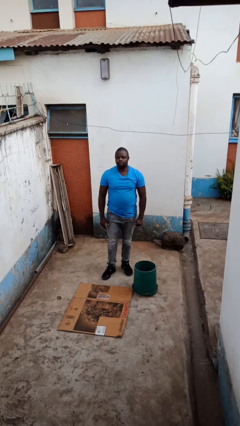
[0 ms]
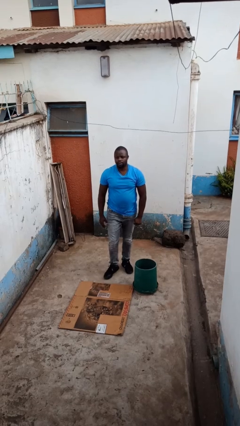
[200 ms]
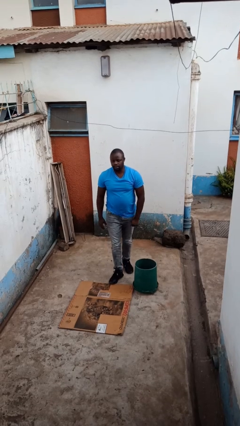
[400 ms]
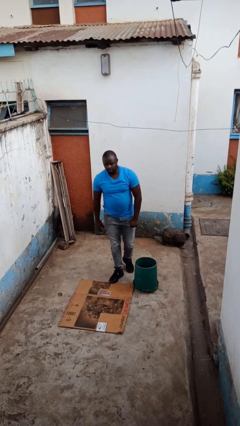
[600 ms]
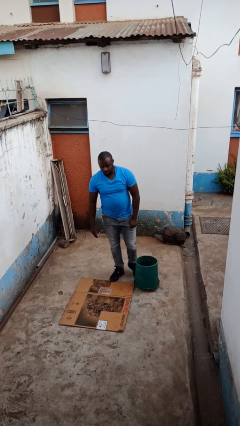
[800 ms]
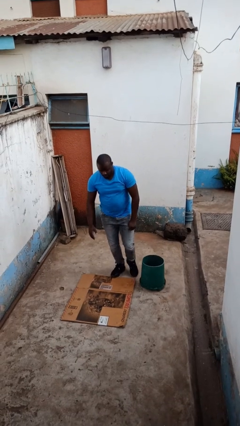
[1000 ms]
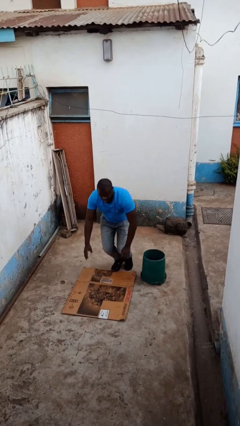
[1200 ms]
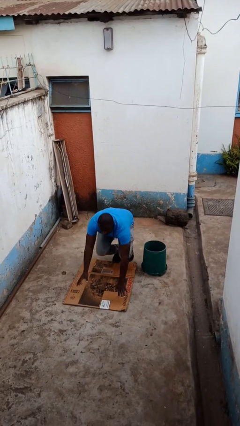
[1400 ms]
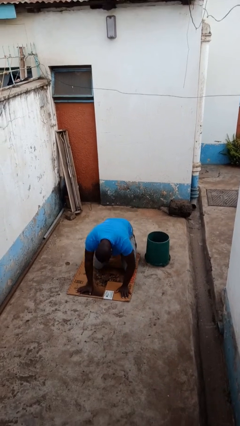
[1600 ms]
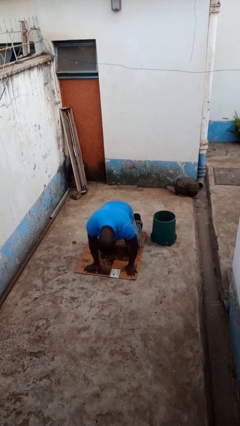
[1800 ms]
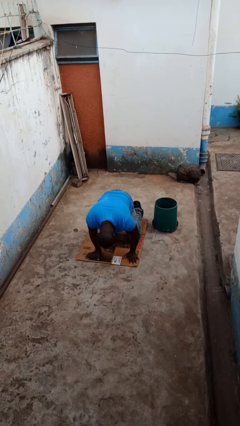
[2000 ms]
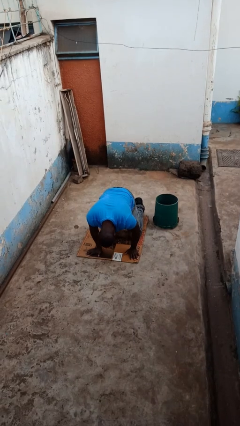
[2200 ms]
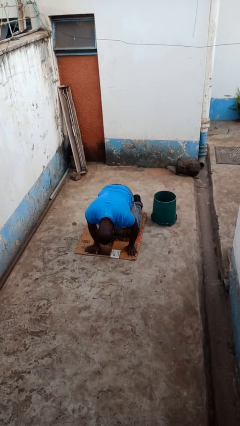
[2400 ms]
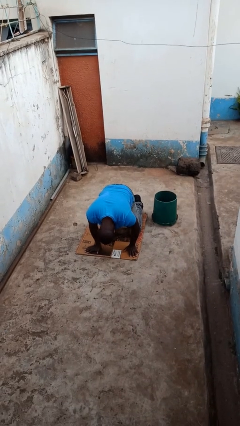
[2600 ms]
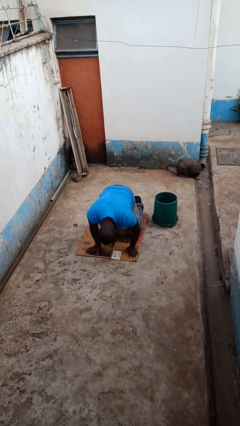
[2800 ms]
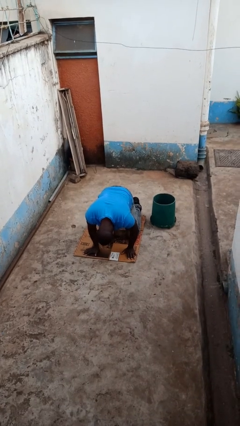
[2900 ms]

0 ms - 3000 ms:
person trips on object on floor

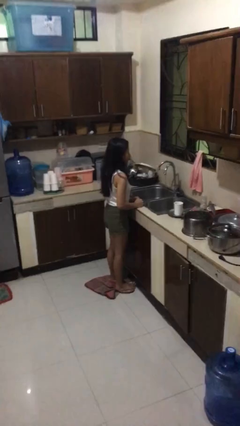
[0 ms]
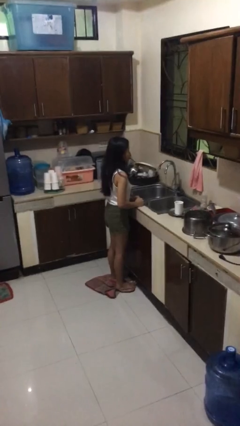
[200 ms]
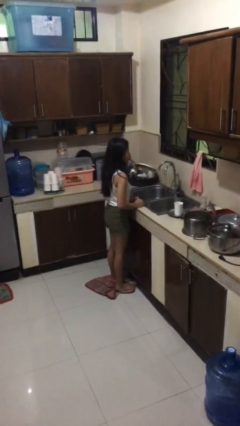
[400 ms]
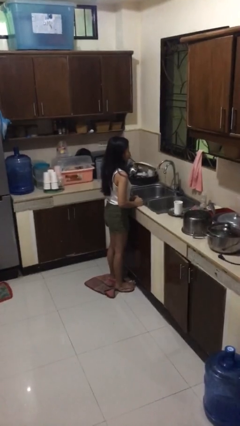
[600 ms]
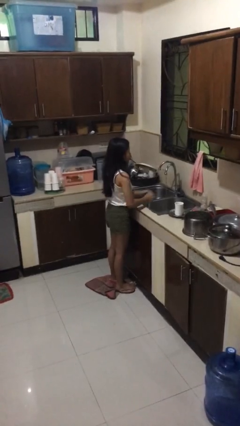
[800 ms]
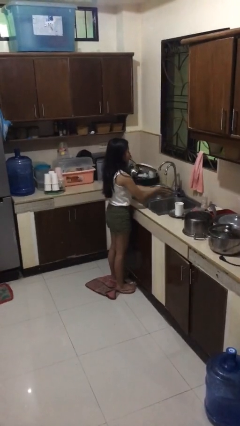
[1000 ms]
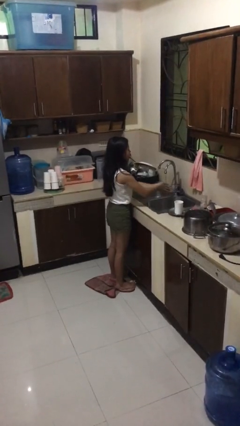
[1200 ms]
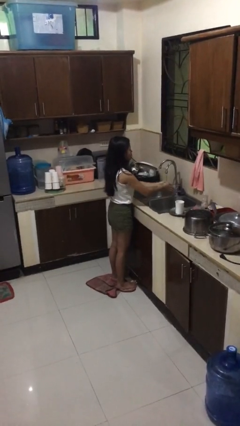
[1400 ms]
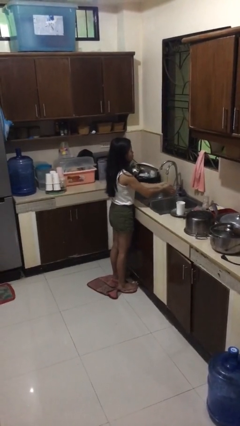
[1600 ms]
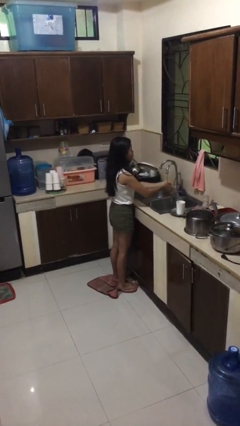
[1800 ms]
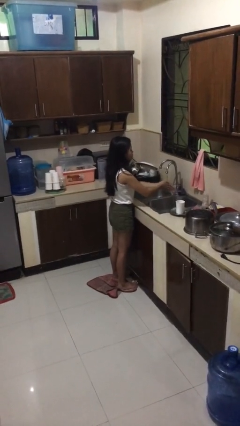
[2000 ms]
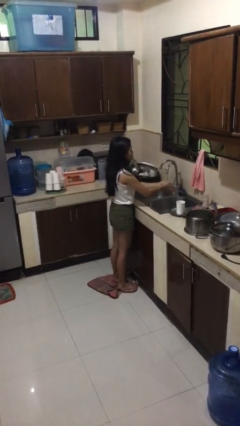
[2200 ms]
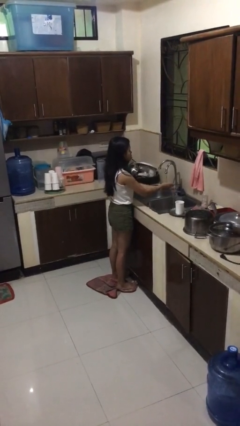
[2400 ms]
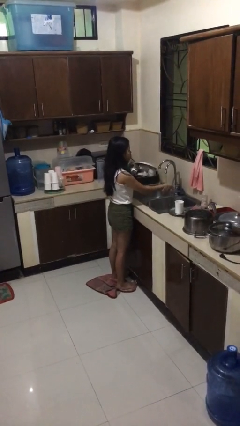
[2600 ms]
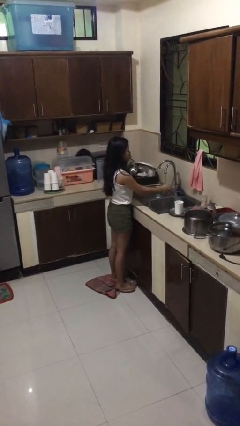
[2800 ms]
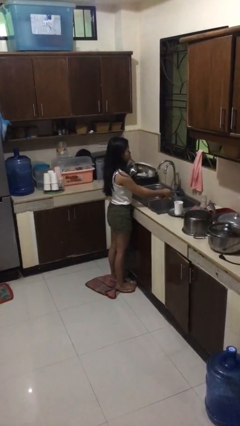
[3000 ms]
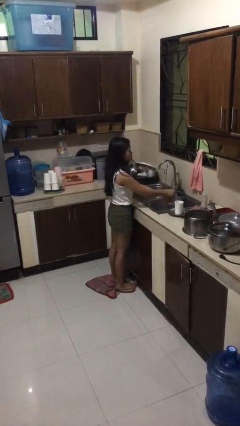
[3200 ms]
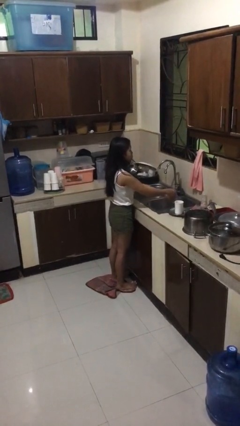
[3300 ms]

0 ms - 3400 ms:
person washes hands

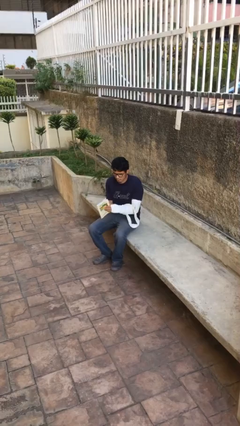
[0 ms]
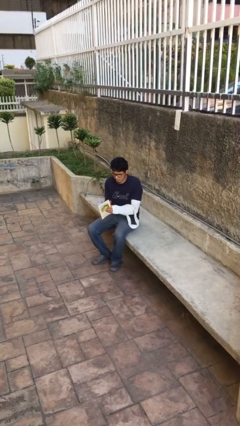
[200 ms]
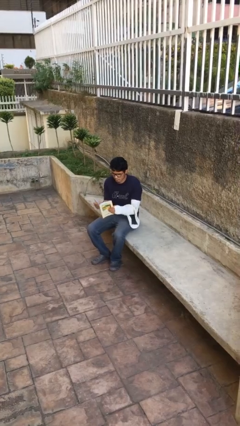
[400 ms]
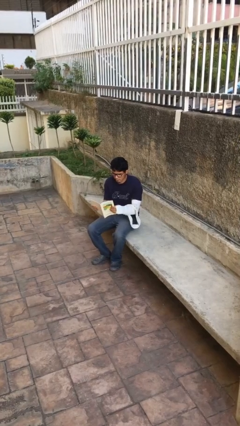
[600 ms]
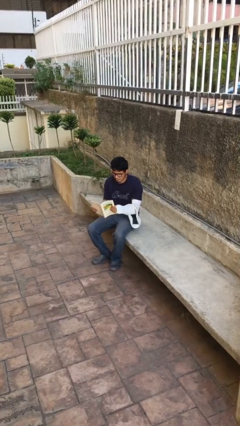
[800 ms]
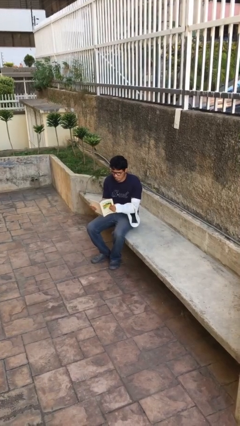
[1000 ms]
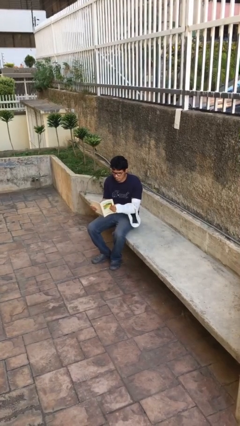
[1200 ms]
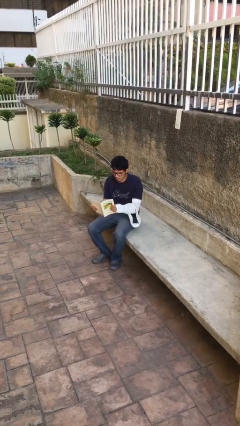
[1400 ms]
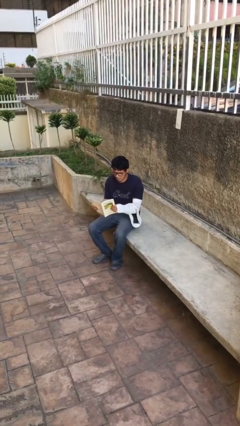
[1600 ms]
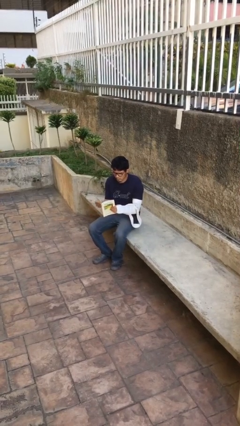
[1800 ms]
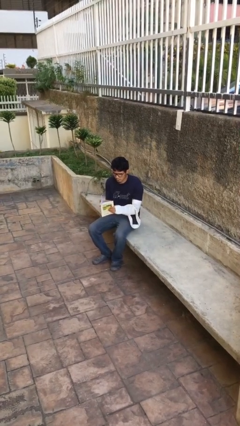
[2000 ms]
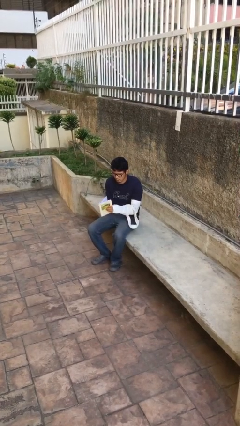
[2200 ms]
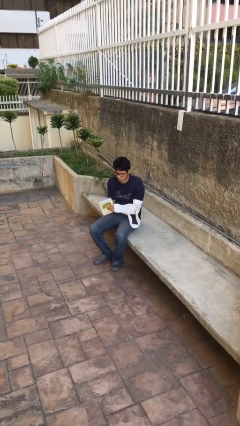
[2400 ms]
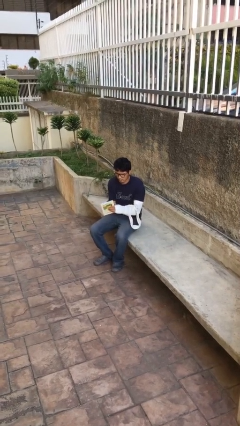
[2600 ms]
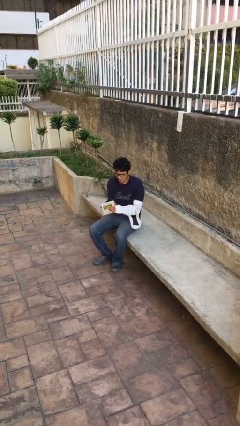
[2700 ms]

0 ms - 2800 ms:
person reads document

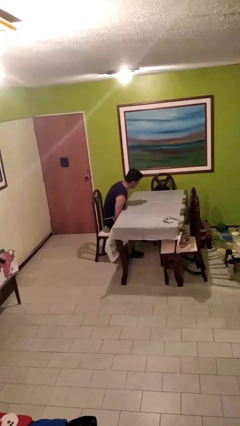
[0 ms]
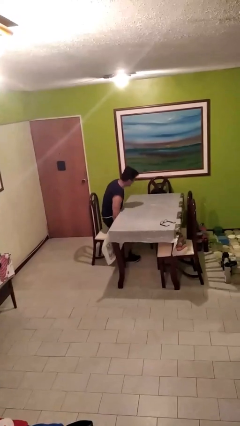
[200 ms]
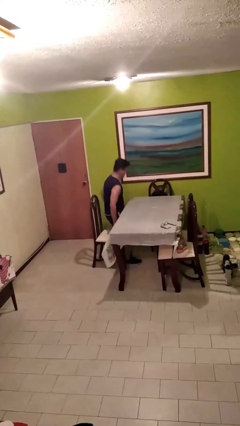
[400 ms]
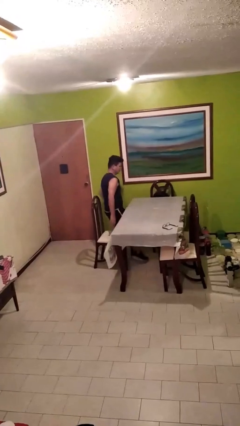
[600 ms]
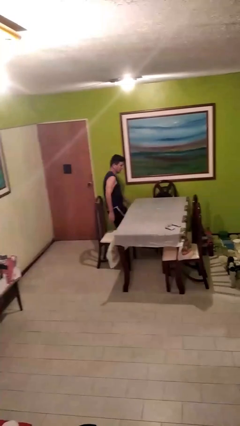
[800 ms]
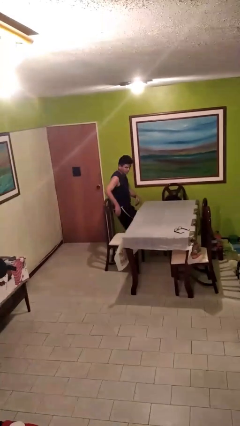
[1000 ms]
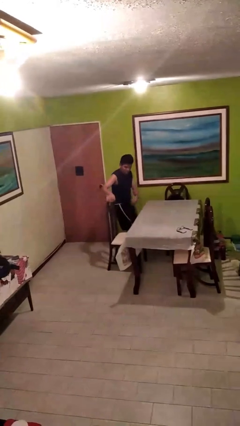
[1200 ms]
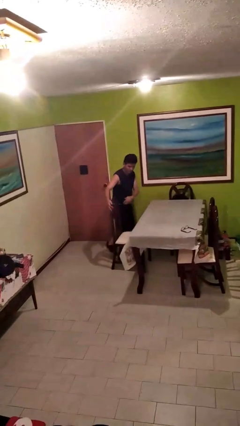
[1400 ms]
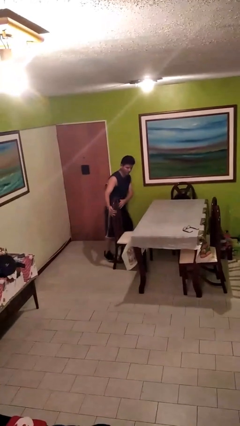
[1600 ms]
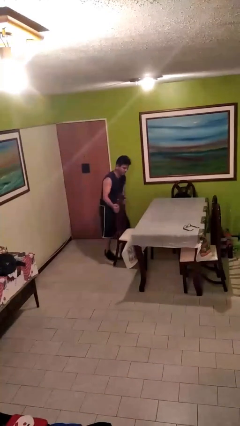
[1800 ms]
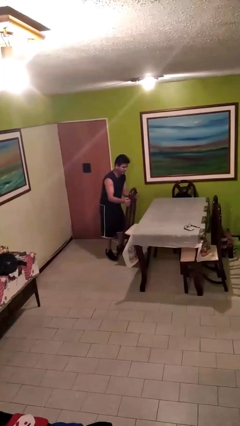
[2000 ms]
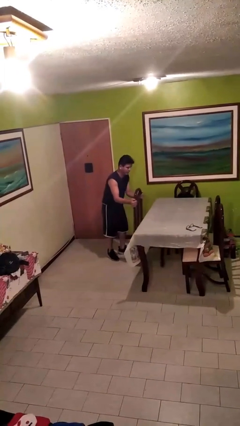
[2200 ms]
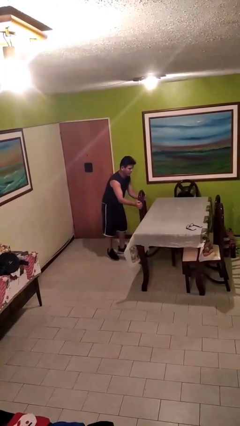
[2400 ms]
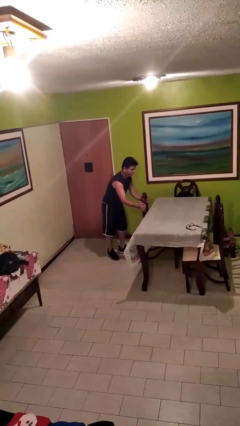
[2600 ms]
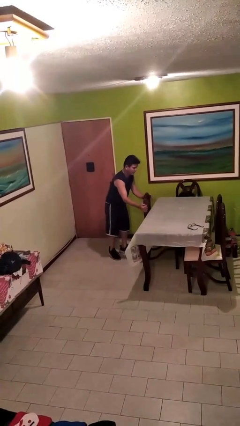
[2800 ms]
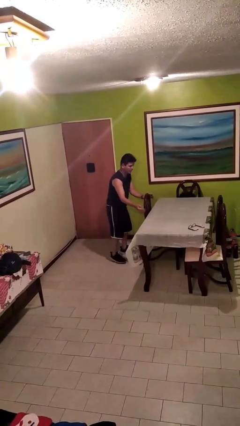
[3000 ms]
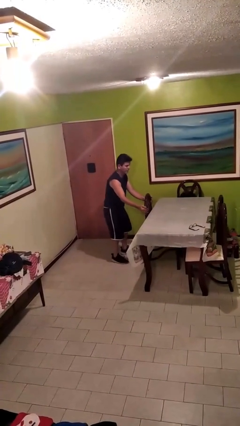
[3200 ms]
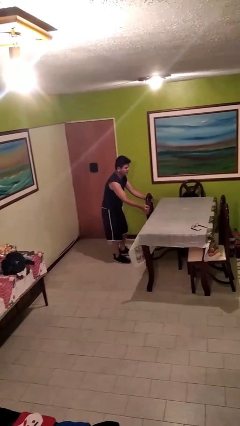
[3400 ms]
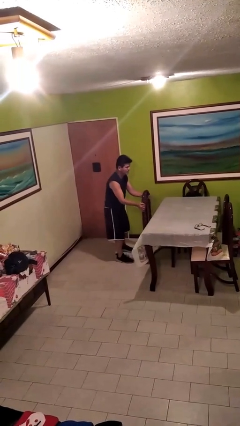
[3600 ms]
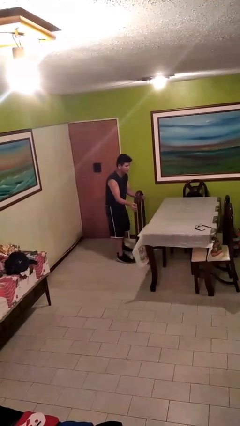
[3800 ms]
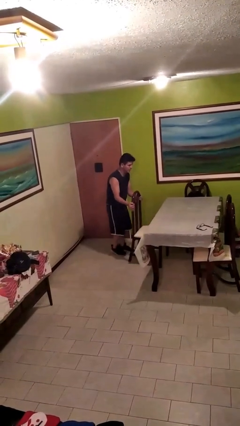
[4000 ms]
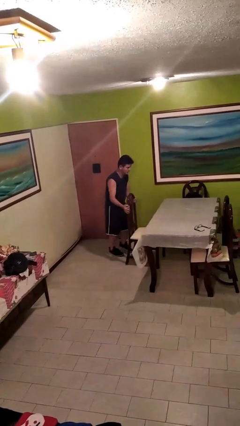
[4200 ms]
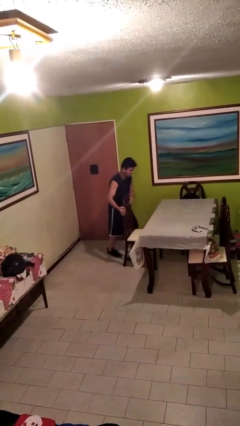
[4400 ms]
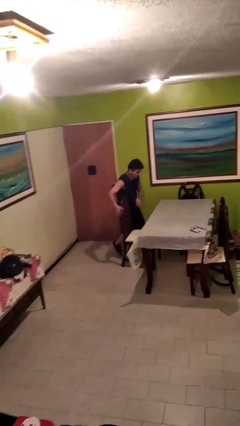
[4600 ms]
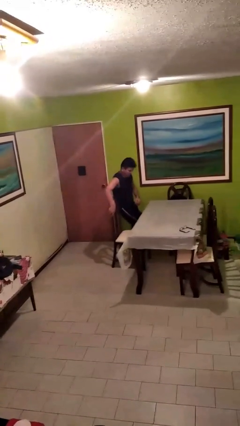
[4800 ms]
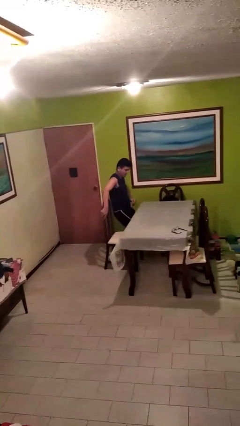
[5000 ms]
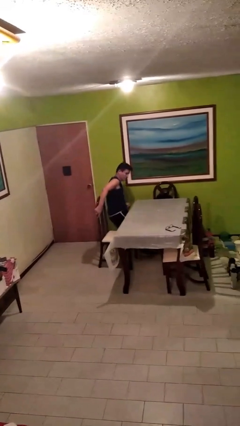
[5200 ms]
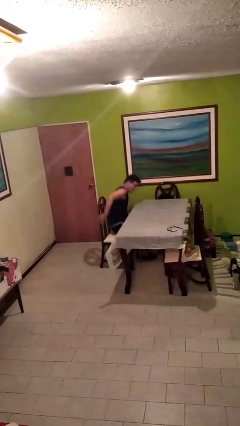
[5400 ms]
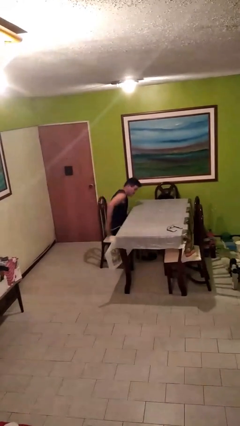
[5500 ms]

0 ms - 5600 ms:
person stands up

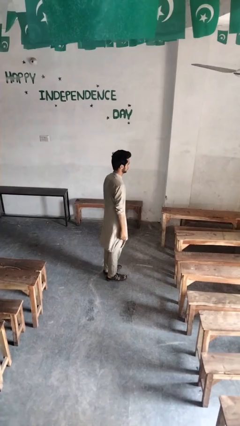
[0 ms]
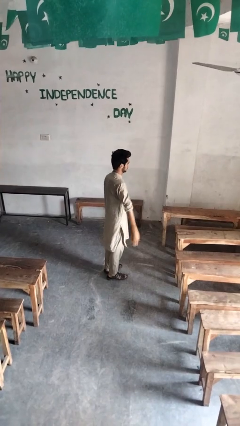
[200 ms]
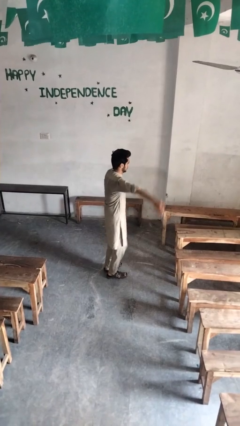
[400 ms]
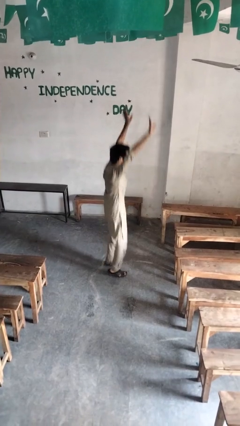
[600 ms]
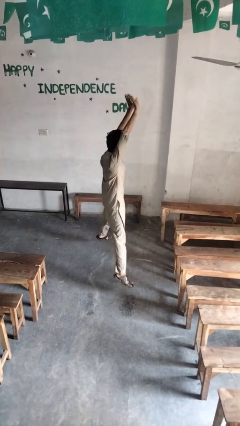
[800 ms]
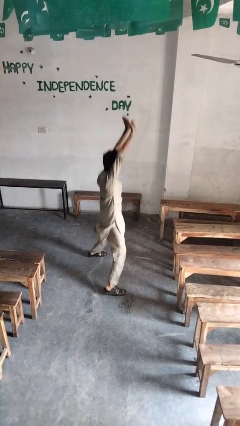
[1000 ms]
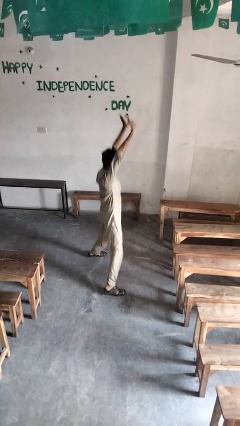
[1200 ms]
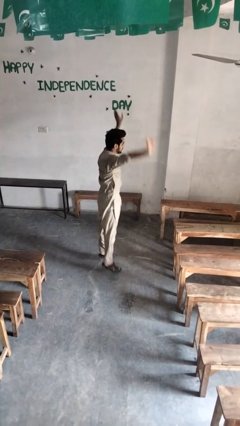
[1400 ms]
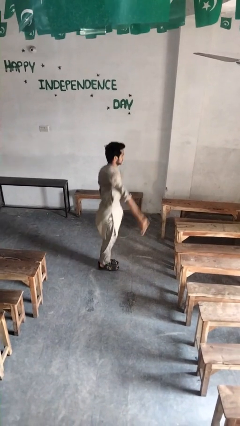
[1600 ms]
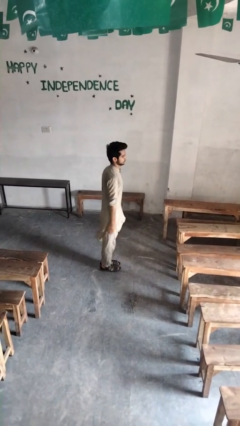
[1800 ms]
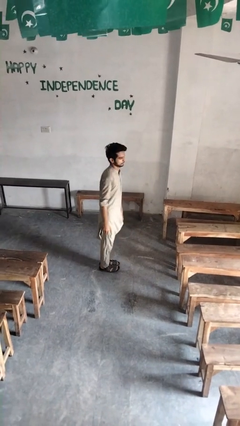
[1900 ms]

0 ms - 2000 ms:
person exercises with jumping jacks

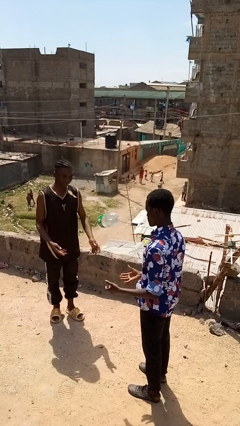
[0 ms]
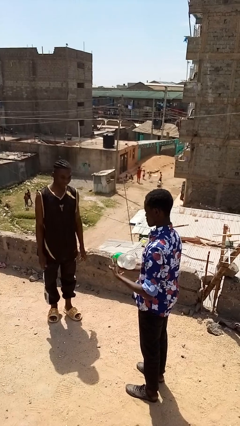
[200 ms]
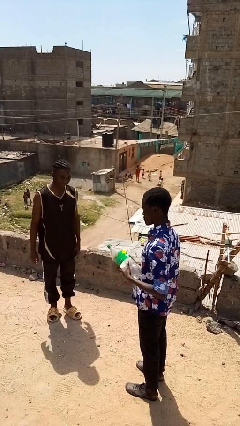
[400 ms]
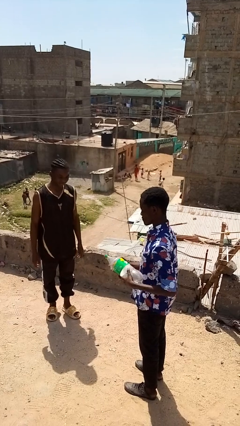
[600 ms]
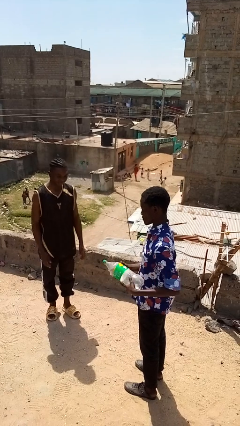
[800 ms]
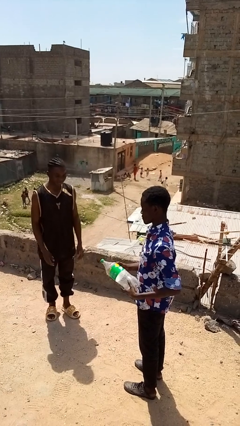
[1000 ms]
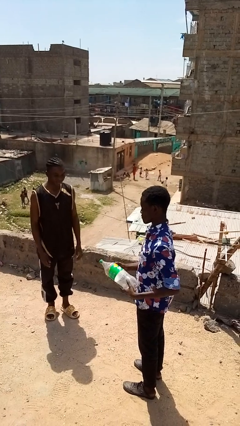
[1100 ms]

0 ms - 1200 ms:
person catches object from person
